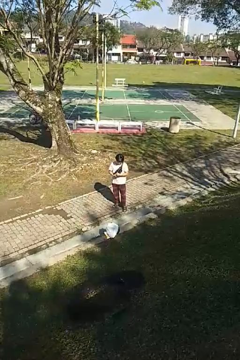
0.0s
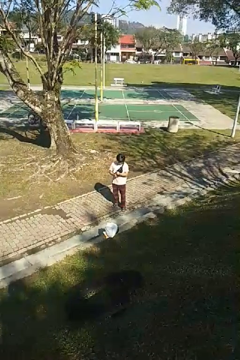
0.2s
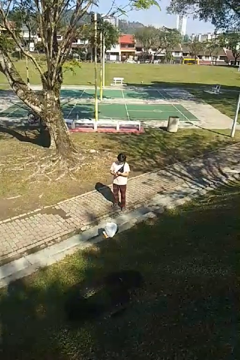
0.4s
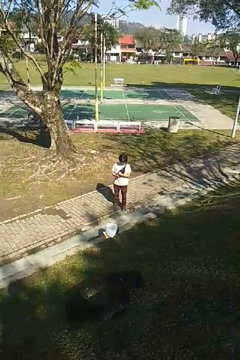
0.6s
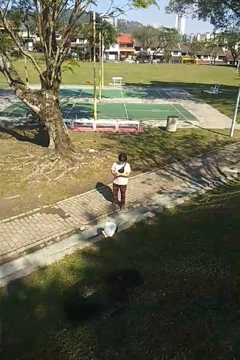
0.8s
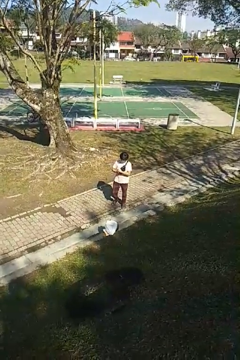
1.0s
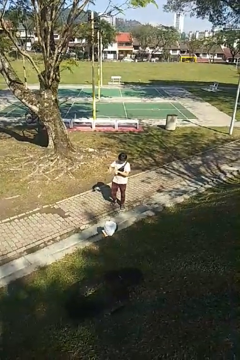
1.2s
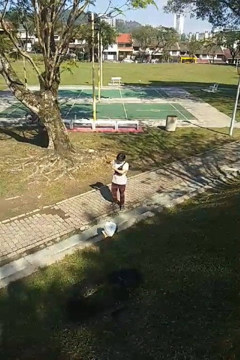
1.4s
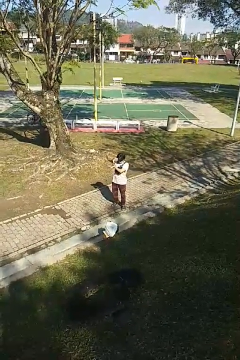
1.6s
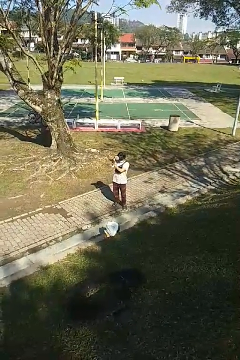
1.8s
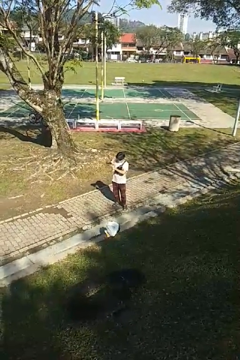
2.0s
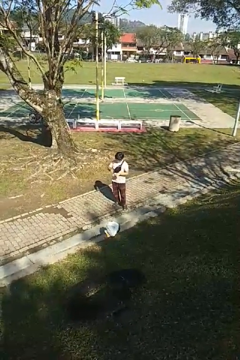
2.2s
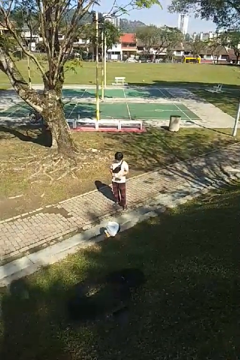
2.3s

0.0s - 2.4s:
person applies deodorant

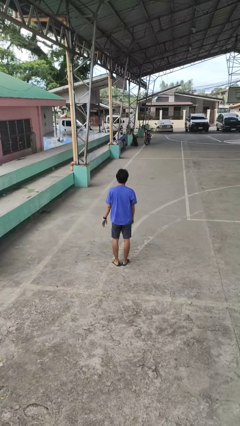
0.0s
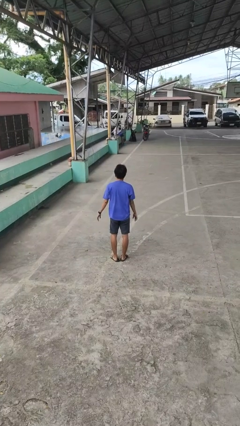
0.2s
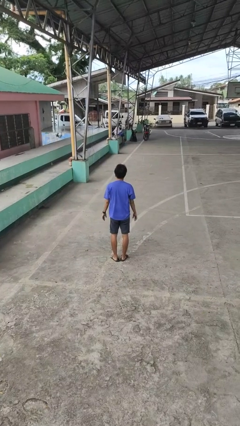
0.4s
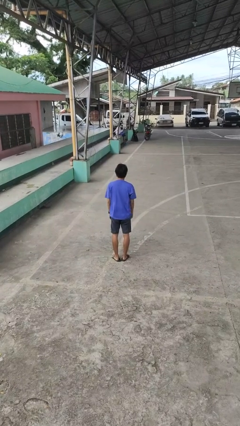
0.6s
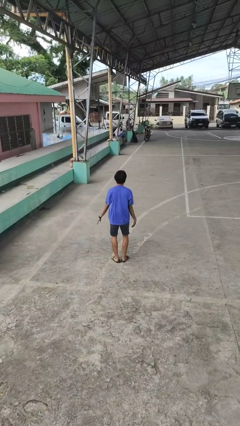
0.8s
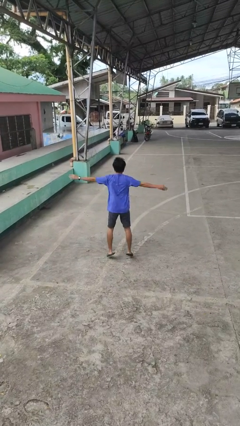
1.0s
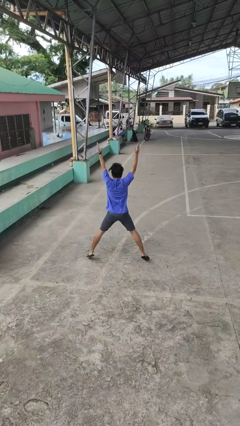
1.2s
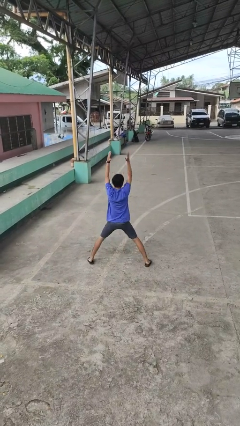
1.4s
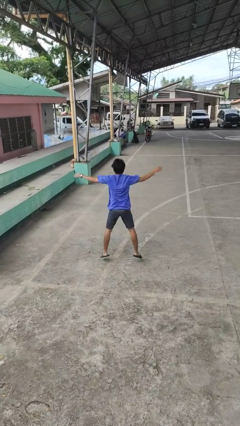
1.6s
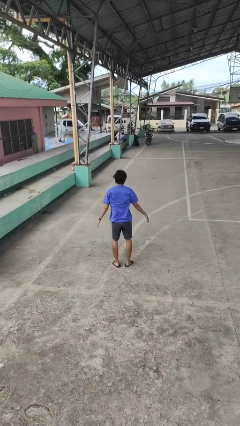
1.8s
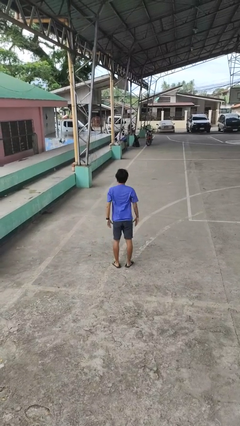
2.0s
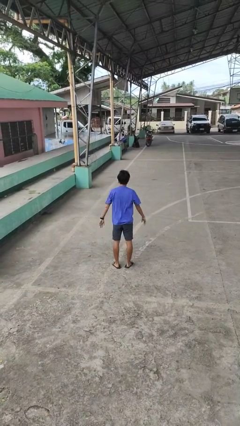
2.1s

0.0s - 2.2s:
person exercises with jumping jacks

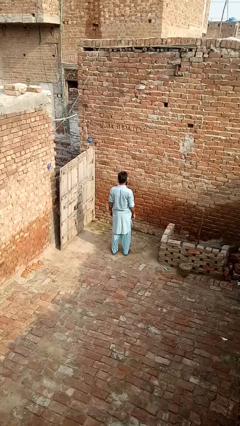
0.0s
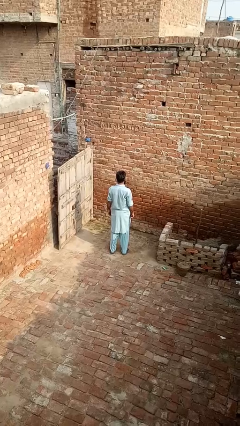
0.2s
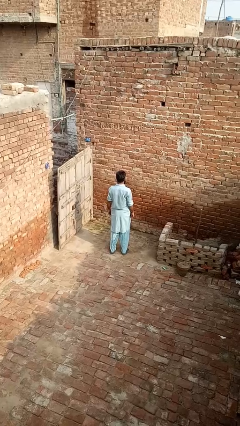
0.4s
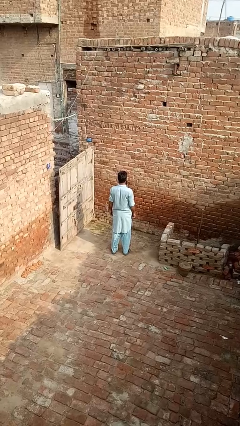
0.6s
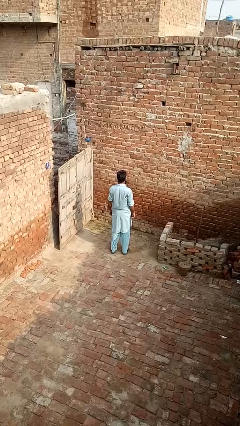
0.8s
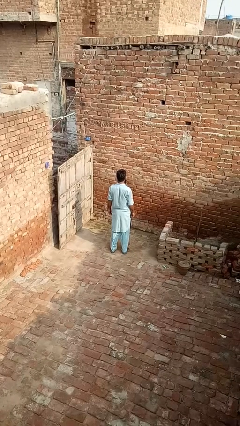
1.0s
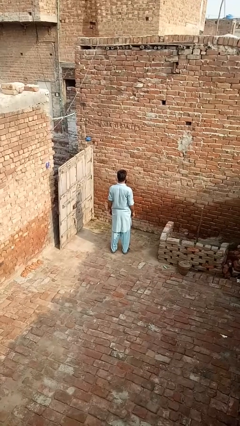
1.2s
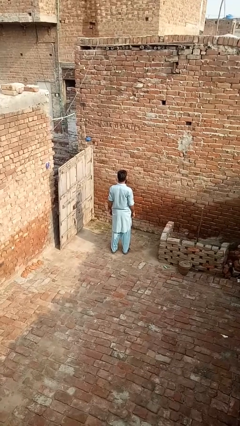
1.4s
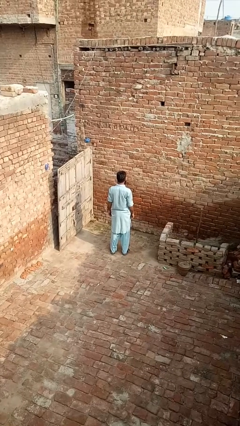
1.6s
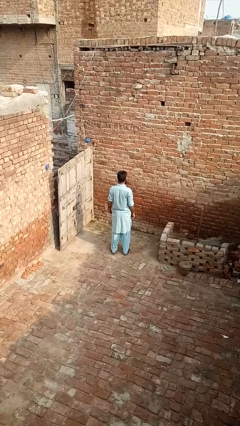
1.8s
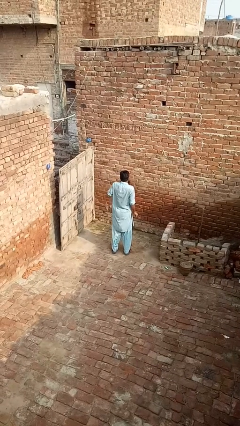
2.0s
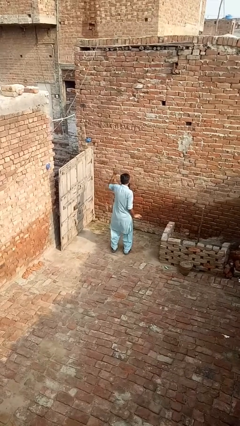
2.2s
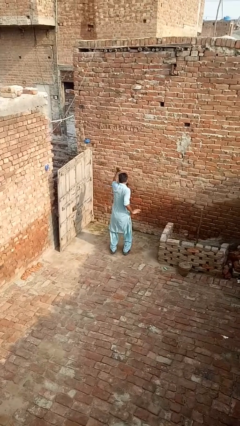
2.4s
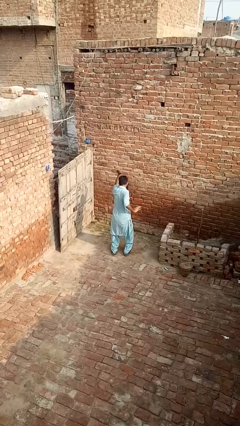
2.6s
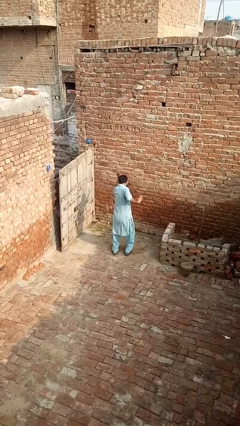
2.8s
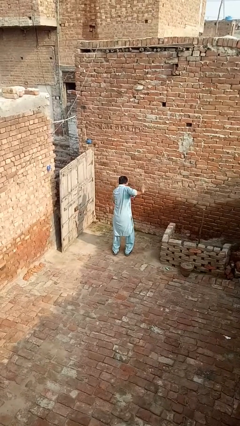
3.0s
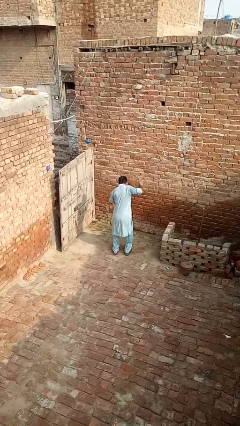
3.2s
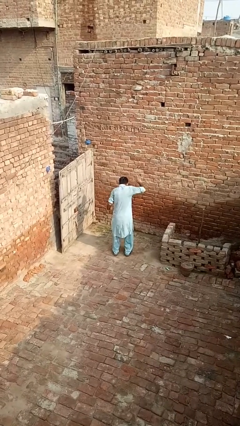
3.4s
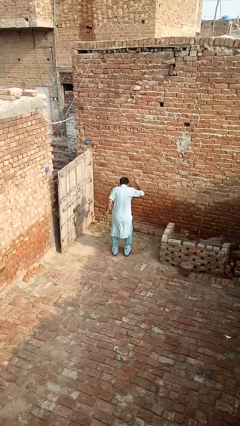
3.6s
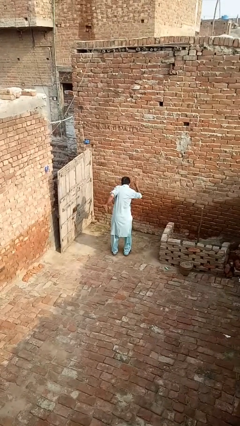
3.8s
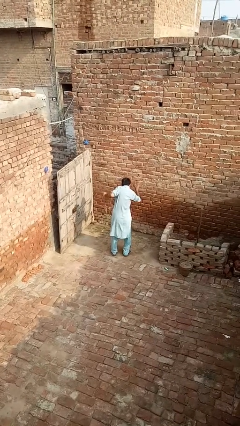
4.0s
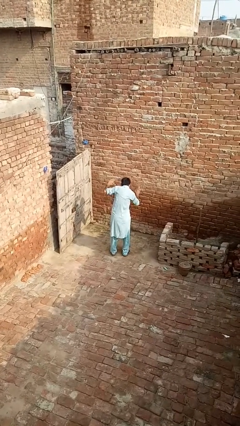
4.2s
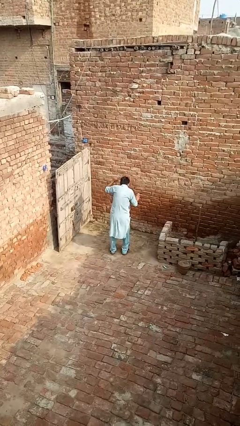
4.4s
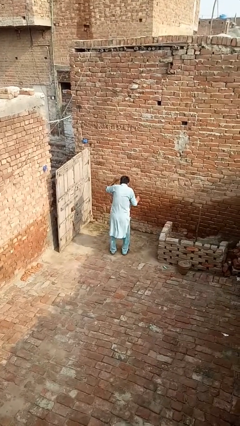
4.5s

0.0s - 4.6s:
person dances in place

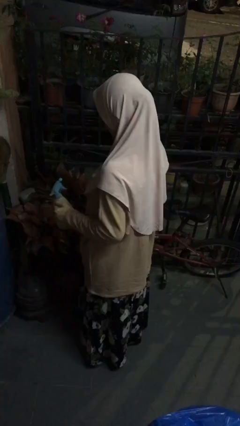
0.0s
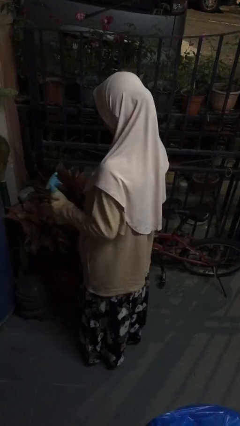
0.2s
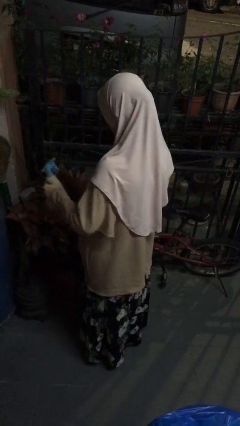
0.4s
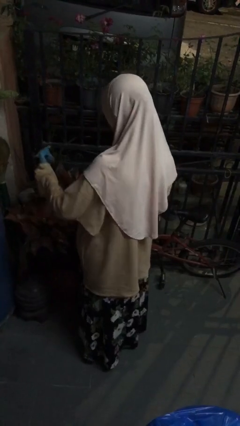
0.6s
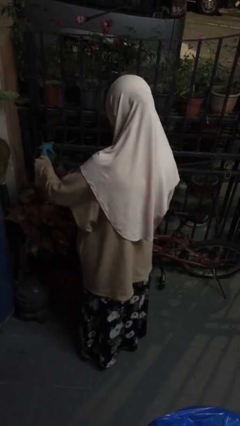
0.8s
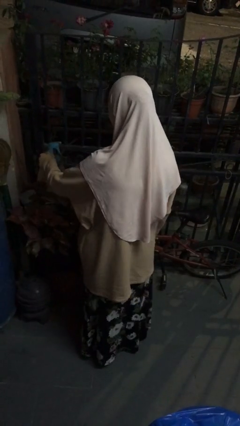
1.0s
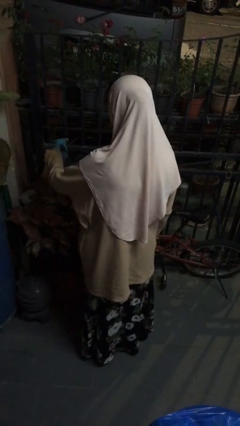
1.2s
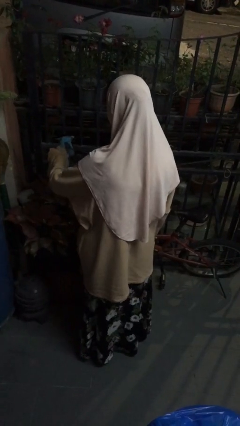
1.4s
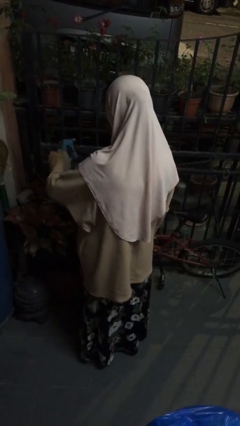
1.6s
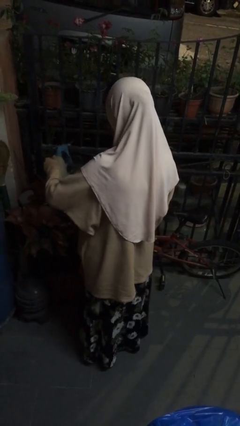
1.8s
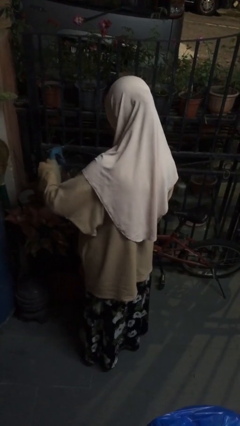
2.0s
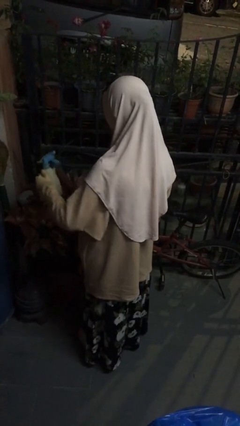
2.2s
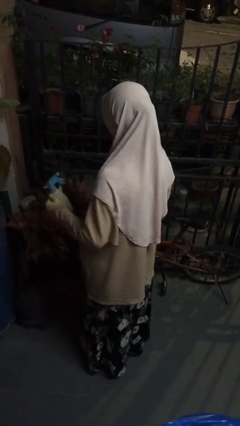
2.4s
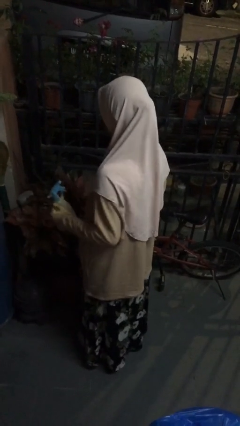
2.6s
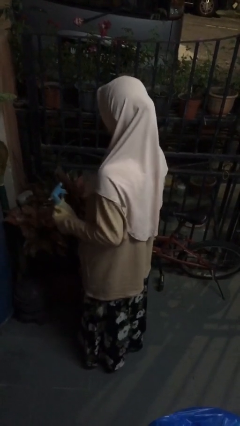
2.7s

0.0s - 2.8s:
person waters houseplant

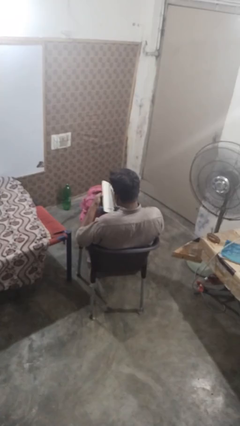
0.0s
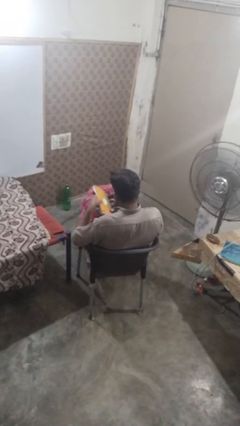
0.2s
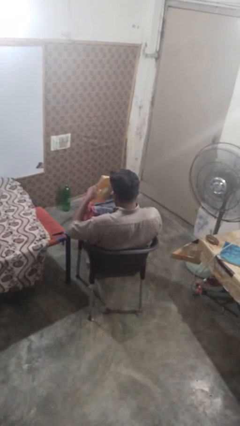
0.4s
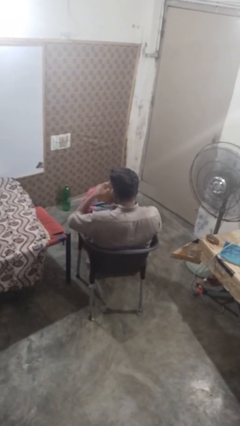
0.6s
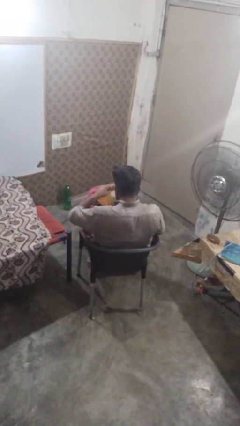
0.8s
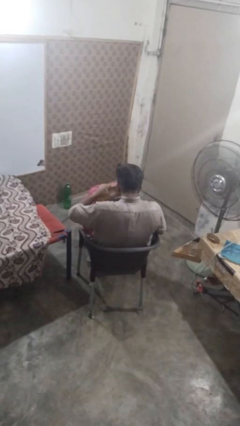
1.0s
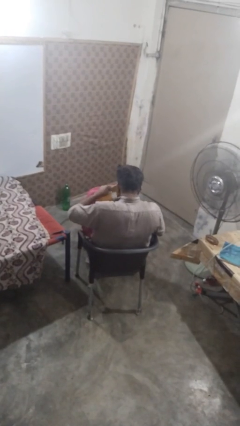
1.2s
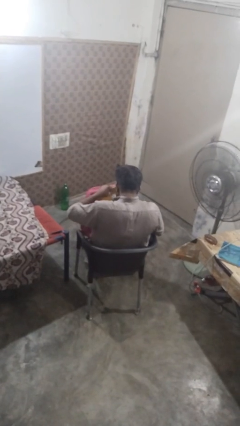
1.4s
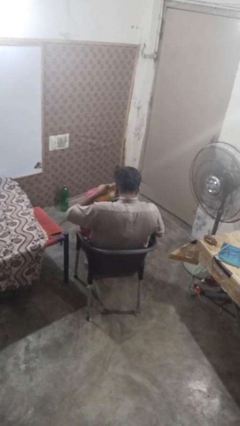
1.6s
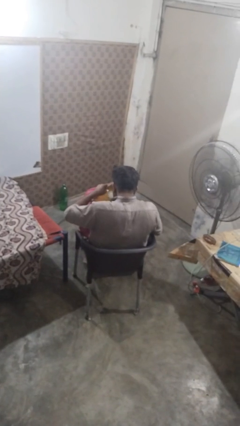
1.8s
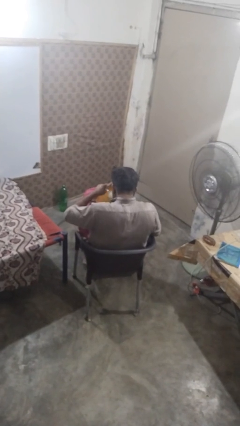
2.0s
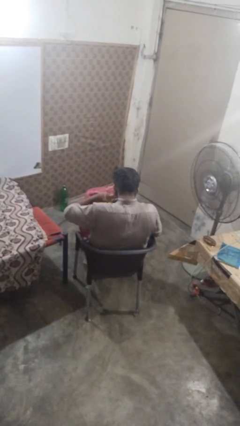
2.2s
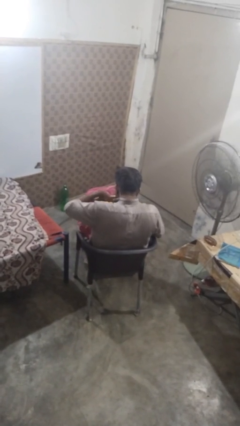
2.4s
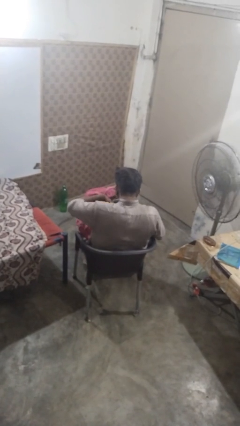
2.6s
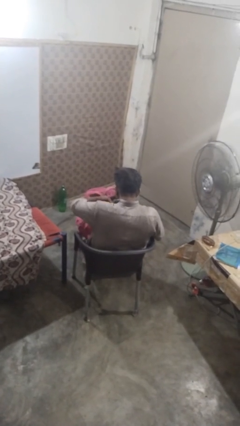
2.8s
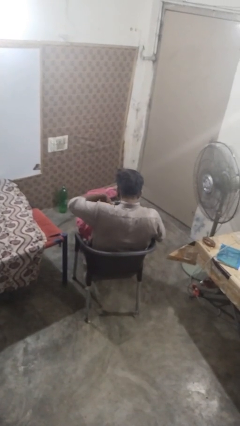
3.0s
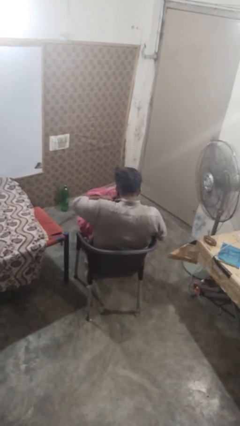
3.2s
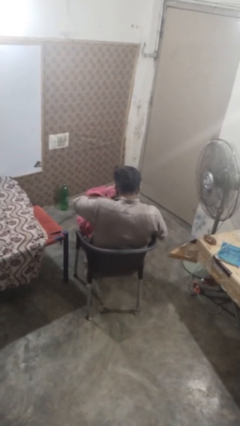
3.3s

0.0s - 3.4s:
person puts object into backpack

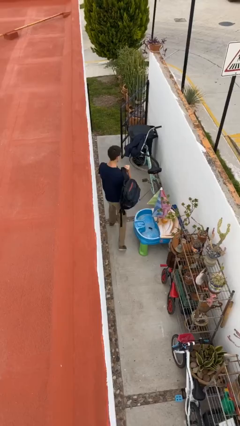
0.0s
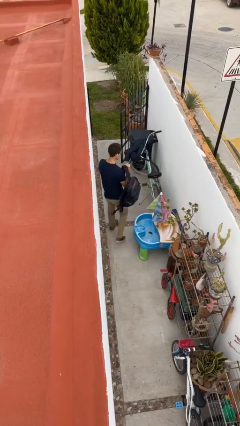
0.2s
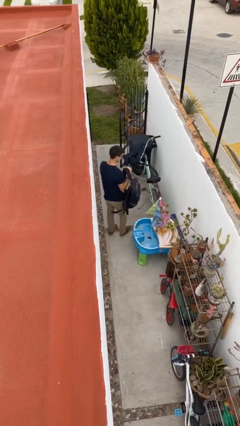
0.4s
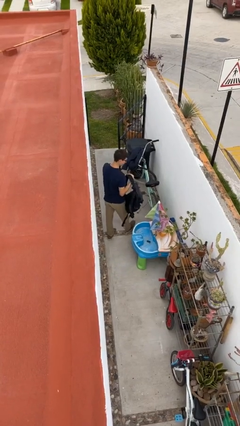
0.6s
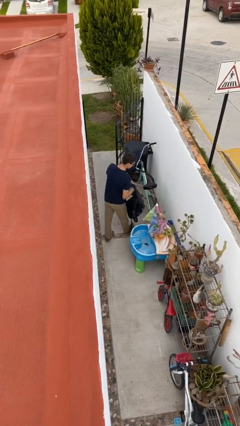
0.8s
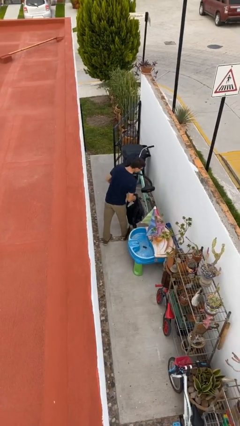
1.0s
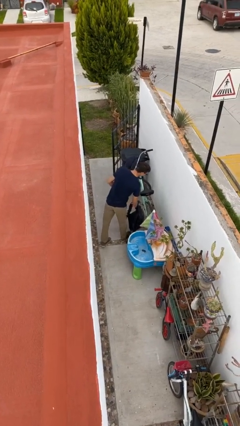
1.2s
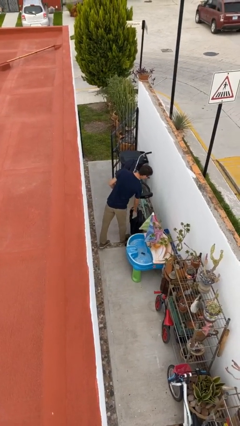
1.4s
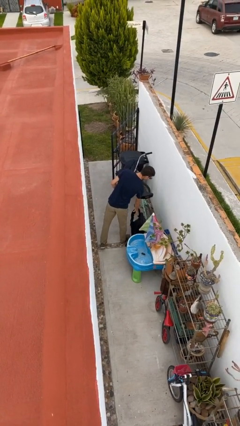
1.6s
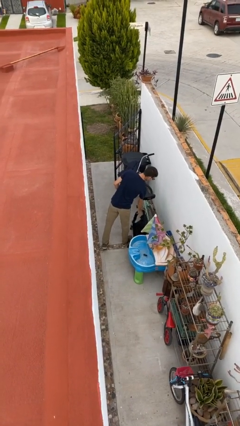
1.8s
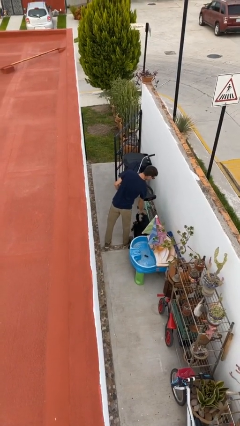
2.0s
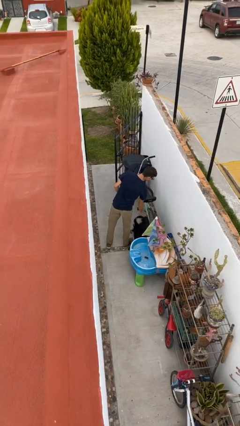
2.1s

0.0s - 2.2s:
person puts down object on floor
